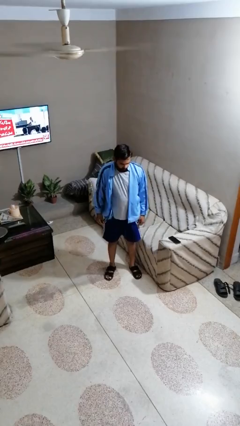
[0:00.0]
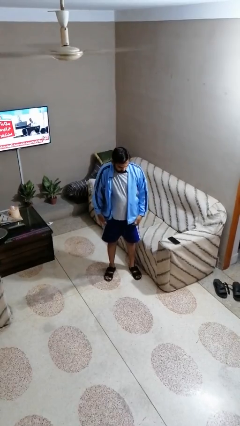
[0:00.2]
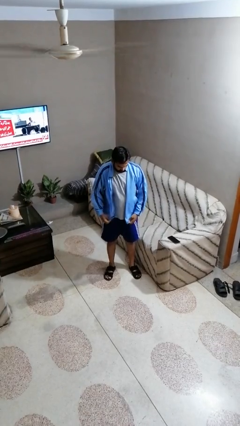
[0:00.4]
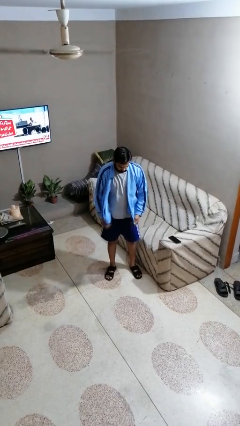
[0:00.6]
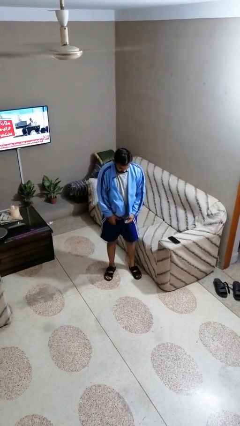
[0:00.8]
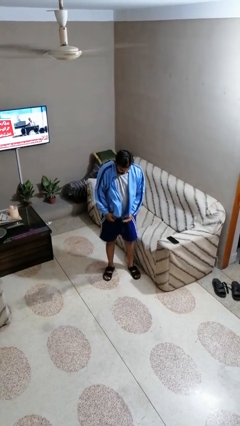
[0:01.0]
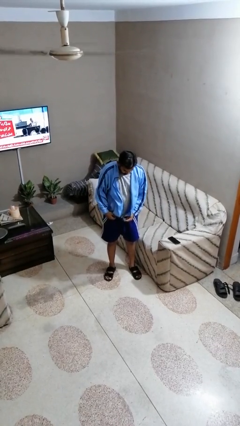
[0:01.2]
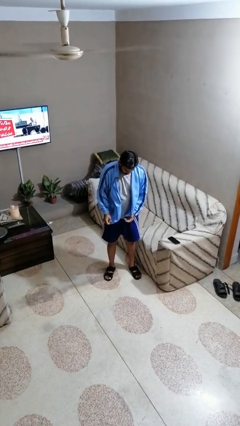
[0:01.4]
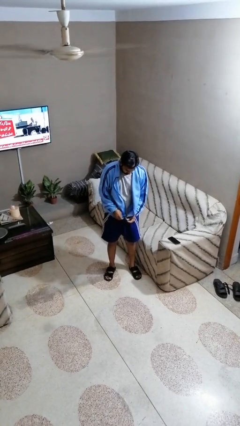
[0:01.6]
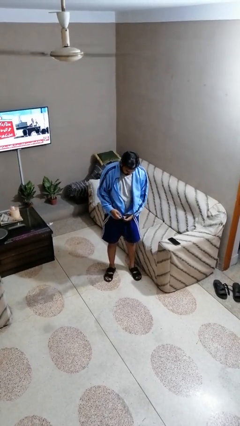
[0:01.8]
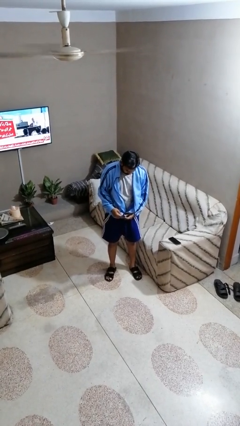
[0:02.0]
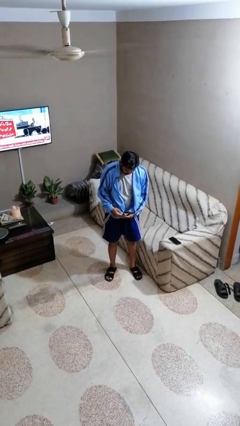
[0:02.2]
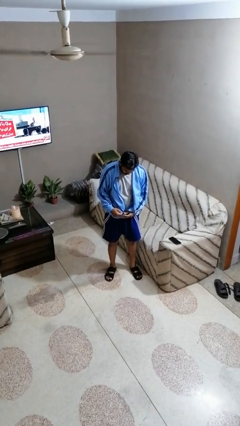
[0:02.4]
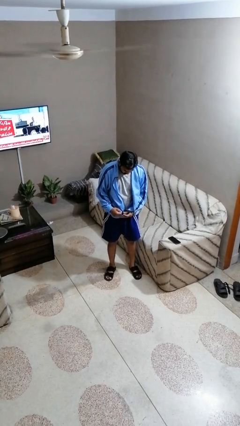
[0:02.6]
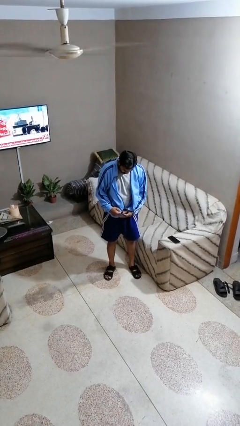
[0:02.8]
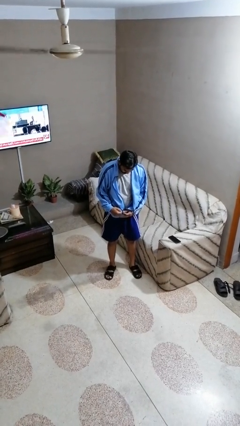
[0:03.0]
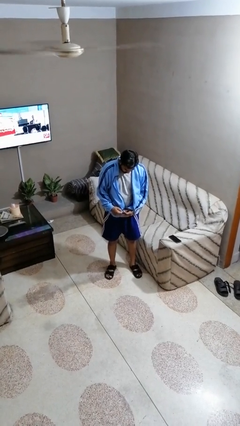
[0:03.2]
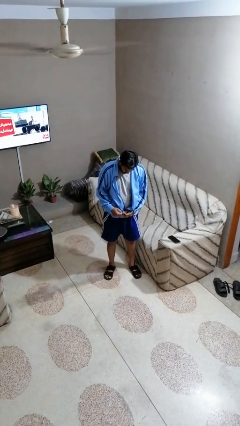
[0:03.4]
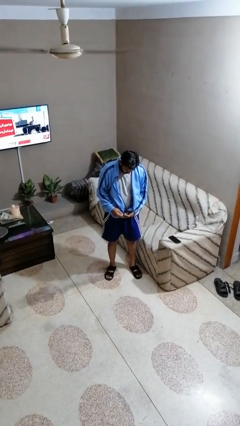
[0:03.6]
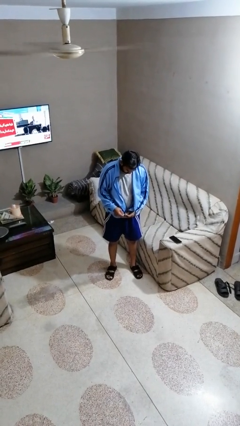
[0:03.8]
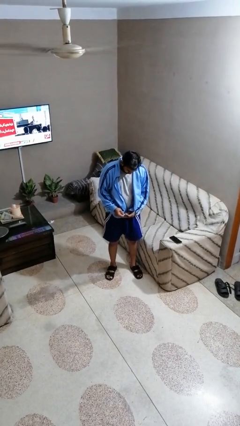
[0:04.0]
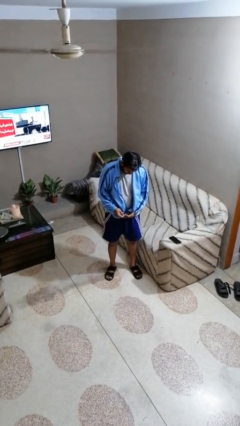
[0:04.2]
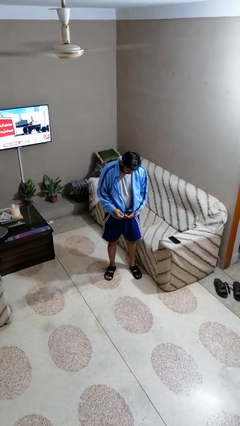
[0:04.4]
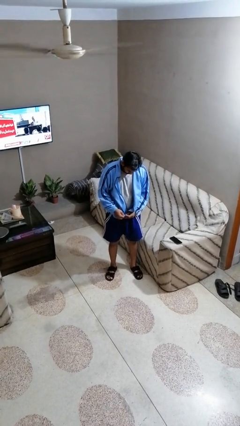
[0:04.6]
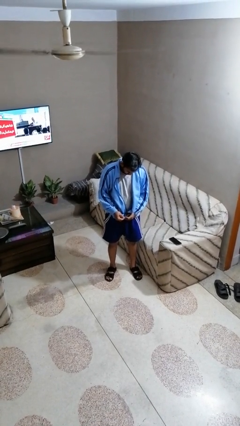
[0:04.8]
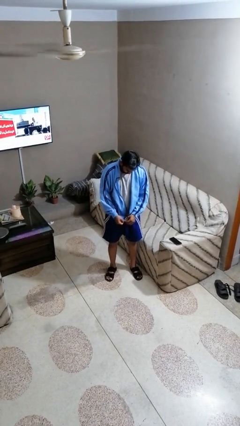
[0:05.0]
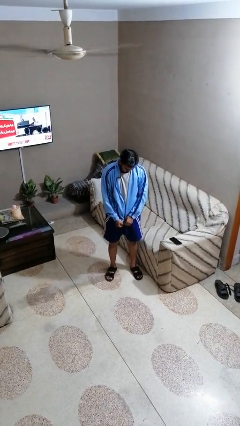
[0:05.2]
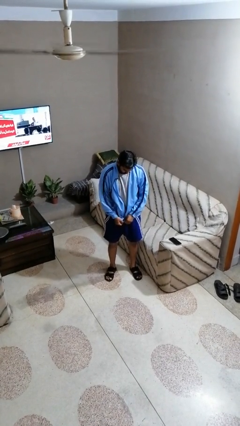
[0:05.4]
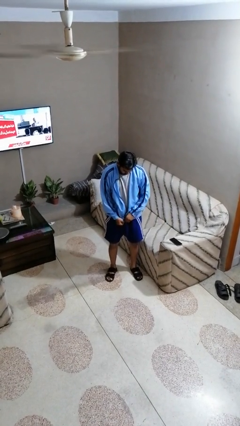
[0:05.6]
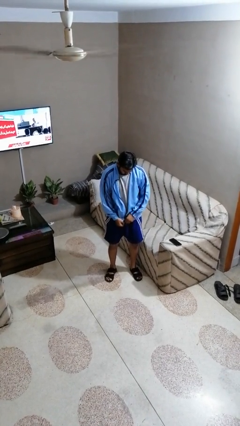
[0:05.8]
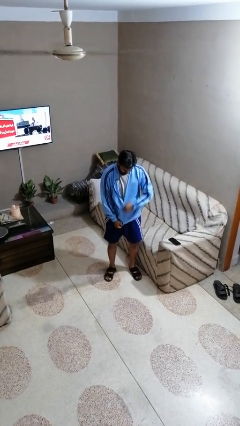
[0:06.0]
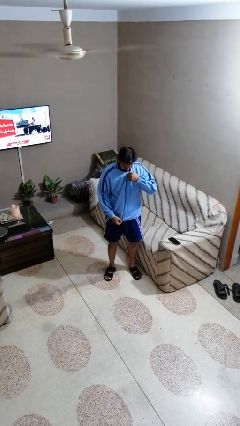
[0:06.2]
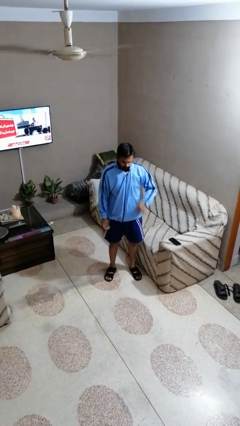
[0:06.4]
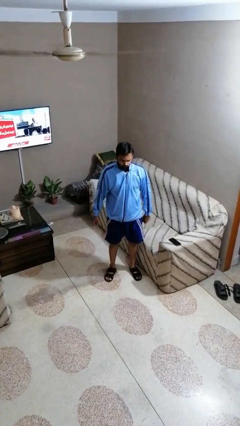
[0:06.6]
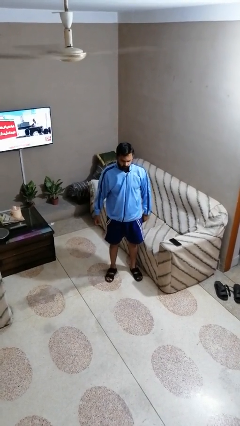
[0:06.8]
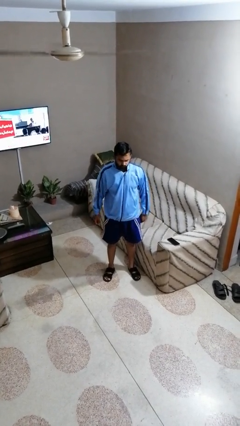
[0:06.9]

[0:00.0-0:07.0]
person zips up jacket

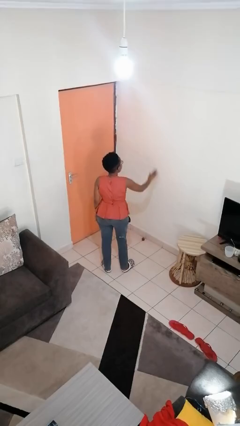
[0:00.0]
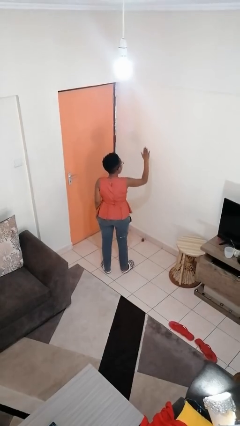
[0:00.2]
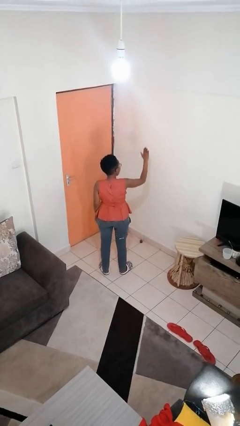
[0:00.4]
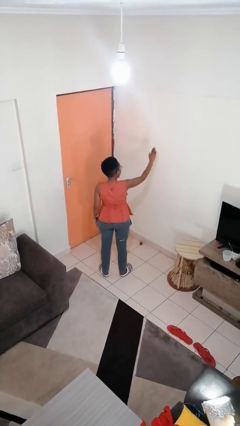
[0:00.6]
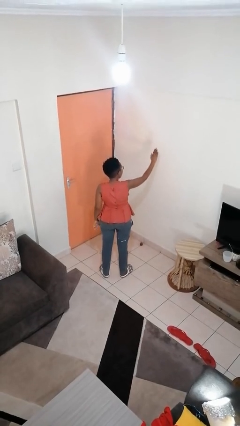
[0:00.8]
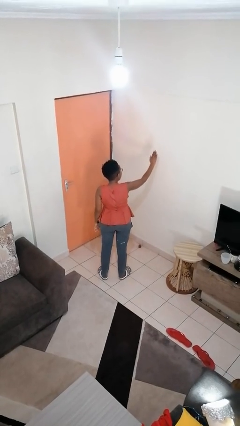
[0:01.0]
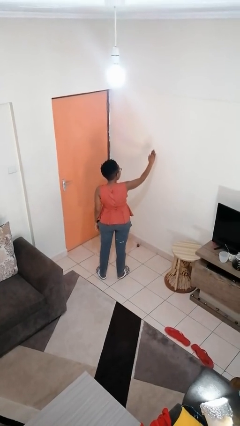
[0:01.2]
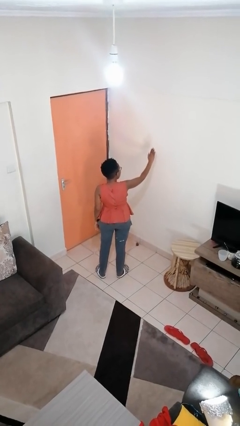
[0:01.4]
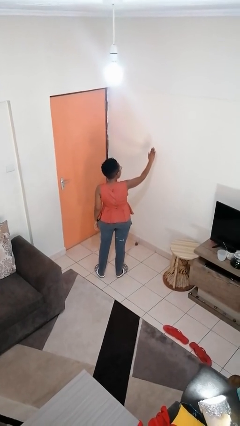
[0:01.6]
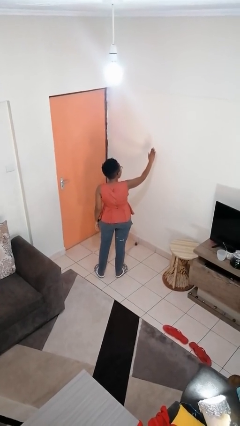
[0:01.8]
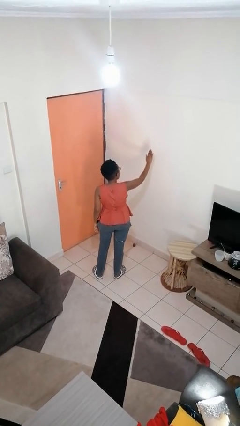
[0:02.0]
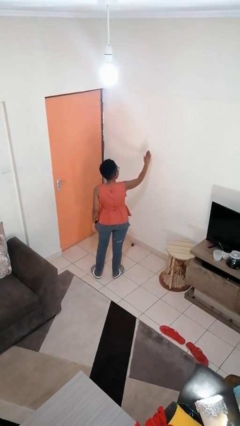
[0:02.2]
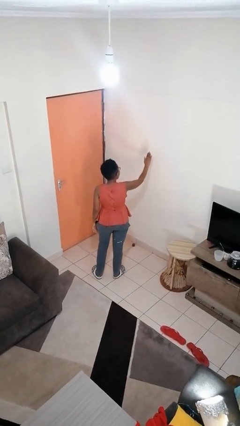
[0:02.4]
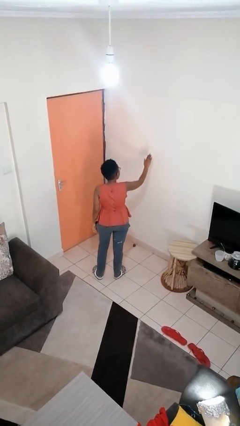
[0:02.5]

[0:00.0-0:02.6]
person gestures stop

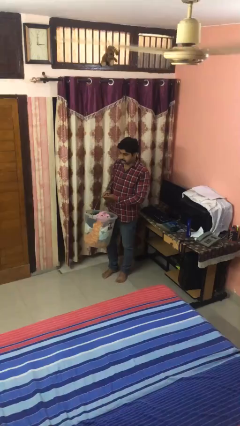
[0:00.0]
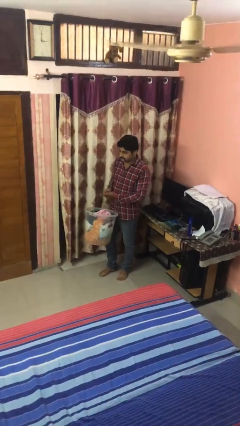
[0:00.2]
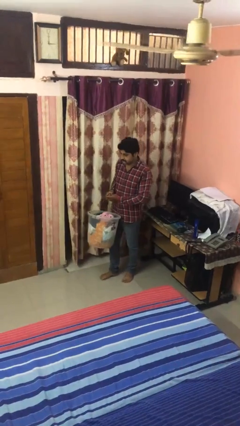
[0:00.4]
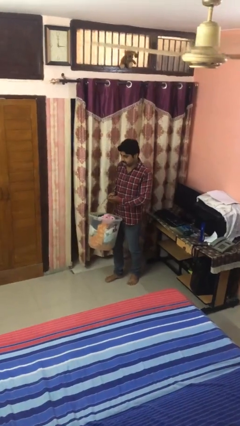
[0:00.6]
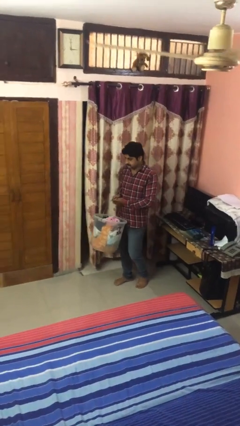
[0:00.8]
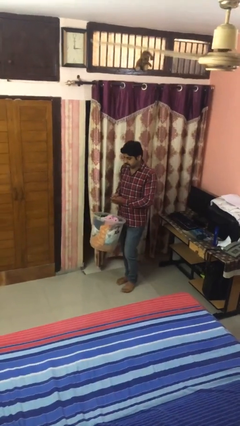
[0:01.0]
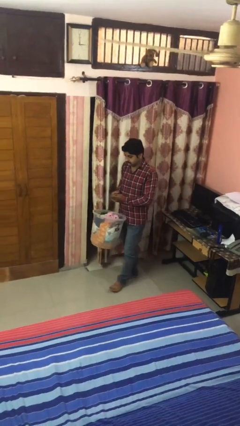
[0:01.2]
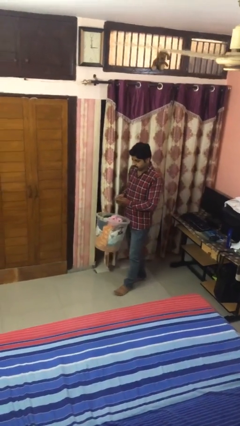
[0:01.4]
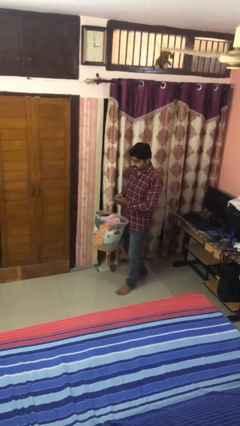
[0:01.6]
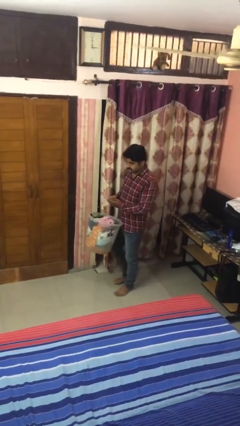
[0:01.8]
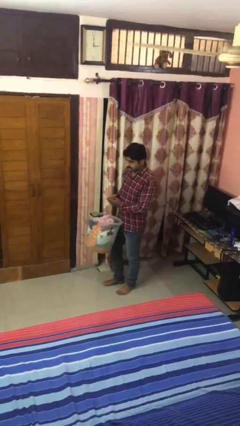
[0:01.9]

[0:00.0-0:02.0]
person carries laundry basket

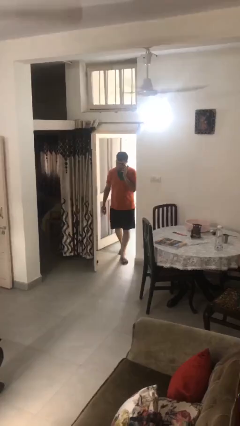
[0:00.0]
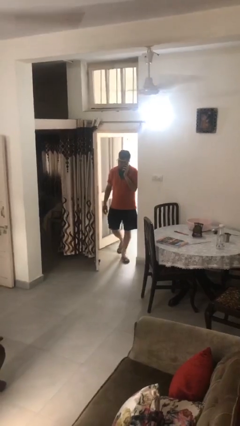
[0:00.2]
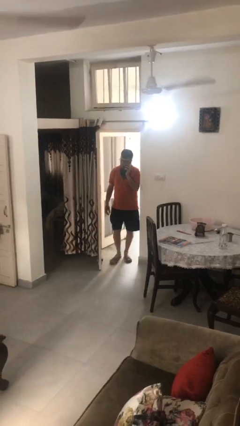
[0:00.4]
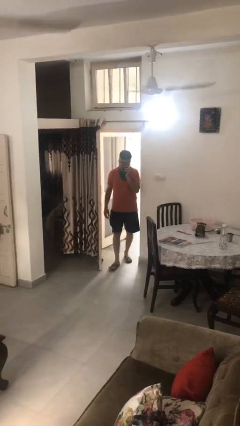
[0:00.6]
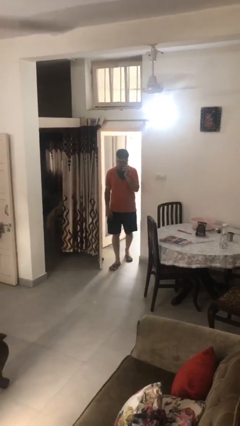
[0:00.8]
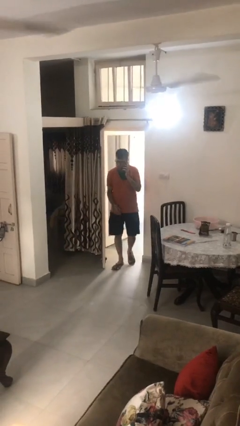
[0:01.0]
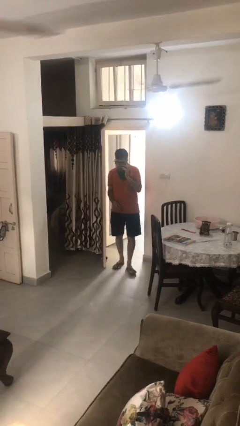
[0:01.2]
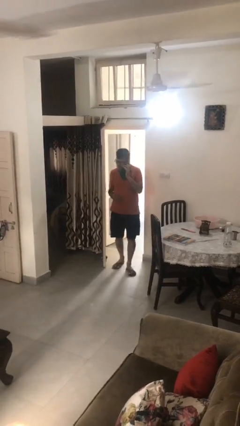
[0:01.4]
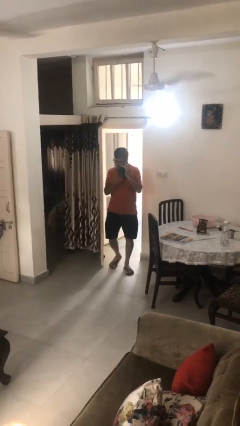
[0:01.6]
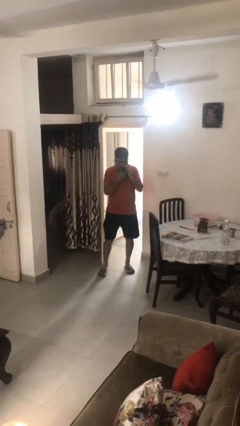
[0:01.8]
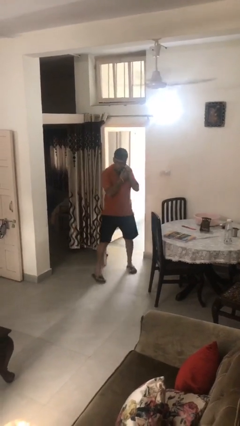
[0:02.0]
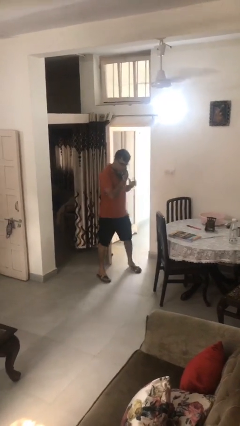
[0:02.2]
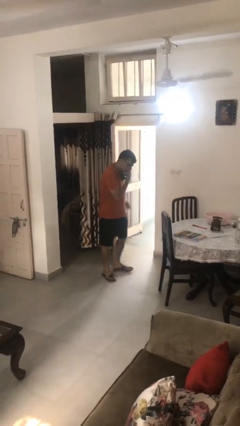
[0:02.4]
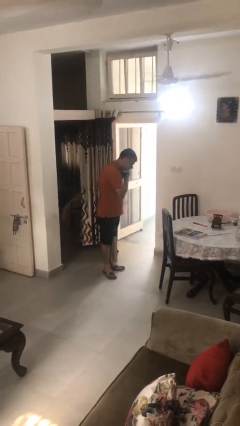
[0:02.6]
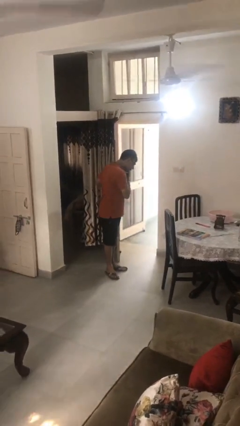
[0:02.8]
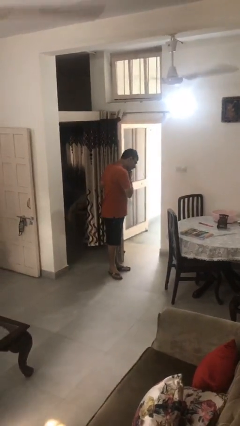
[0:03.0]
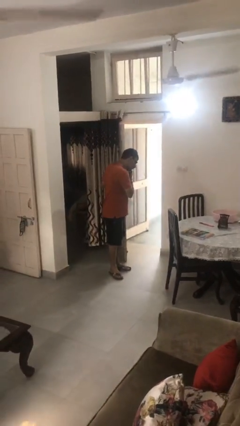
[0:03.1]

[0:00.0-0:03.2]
person enters scene through structure

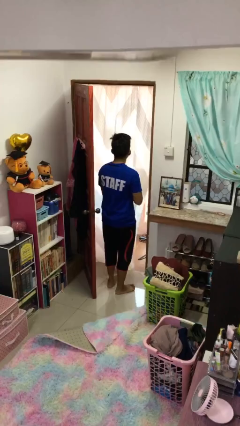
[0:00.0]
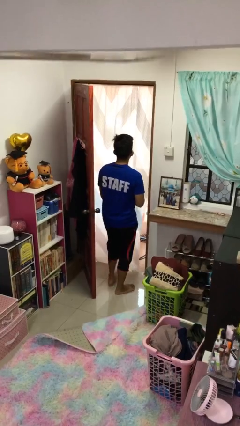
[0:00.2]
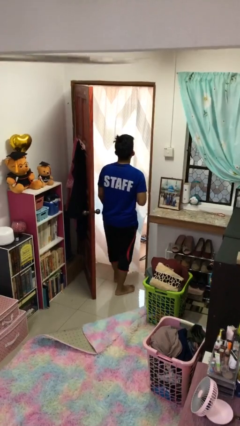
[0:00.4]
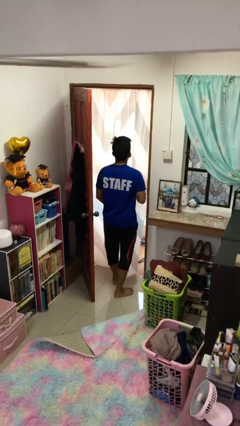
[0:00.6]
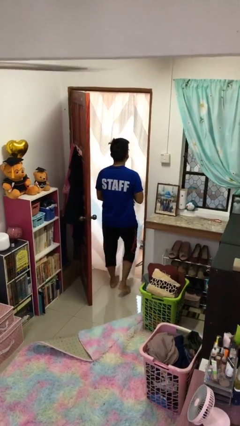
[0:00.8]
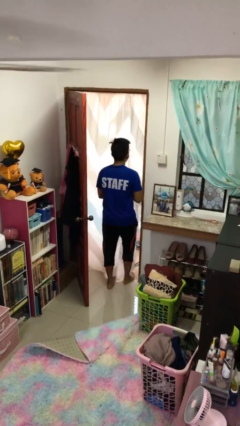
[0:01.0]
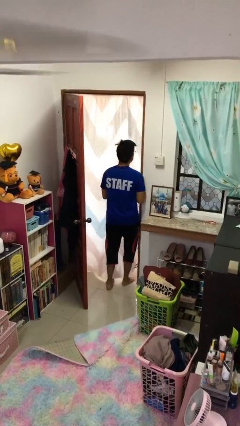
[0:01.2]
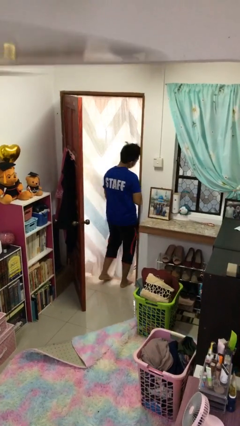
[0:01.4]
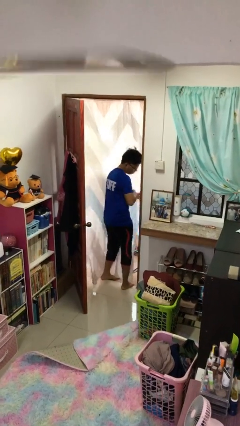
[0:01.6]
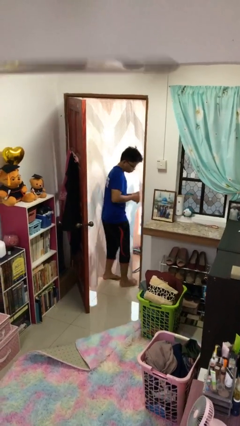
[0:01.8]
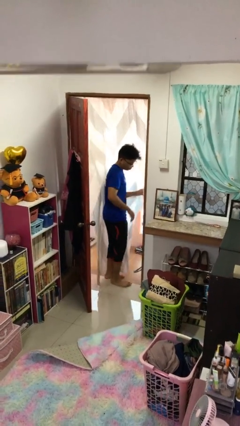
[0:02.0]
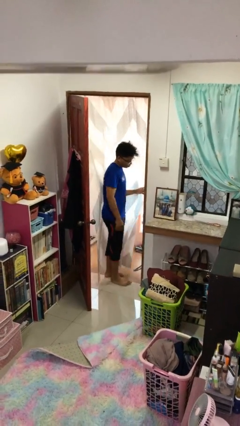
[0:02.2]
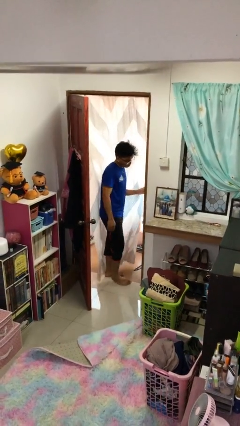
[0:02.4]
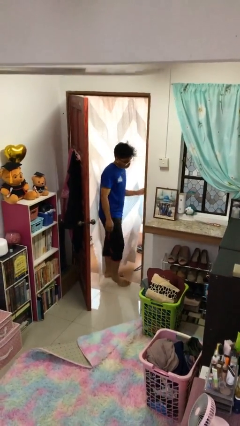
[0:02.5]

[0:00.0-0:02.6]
person bumps into wall

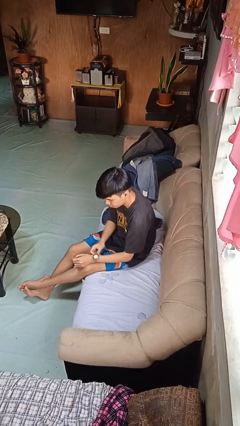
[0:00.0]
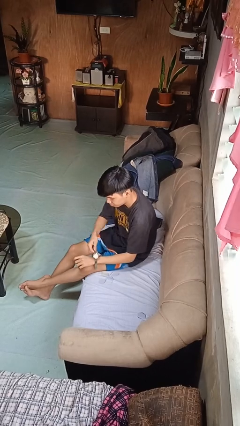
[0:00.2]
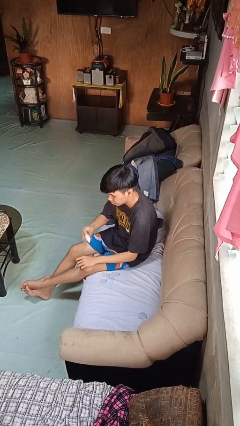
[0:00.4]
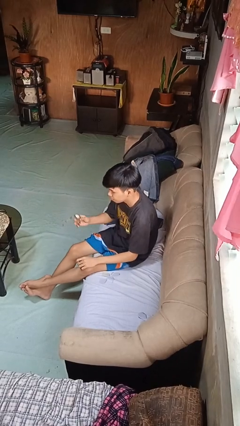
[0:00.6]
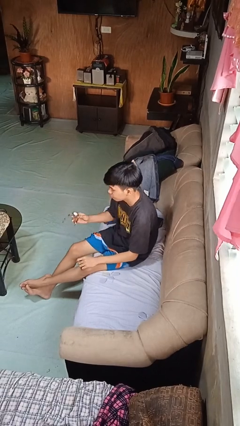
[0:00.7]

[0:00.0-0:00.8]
person takes off wristwatch
